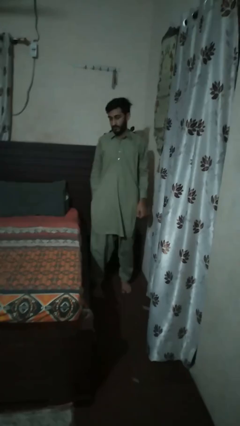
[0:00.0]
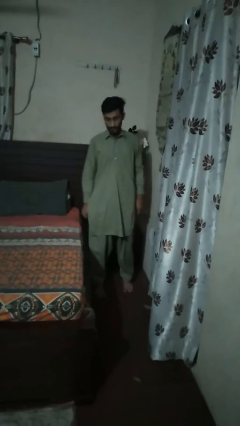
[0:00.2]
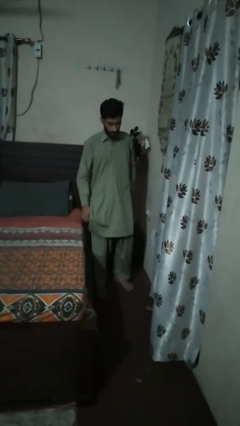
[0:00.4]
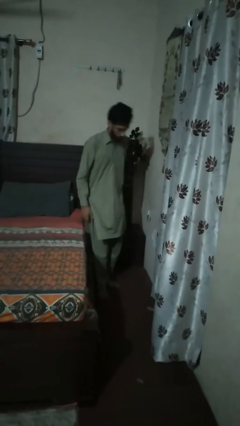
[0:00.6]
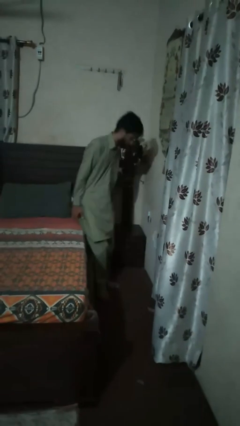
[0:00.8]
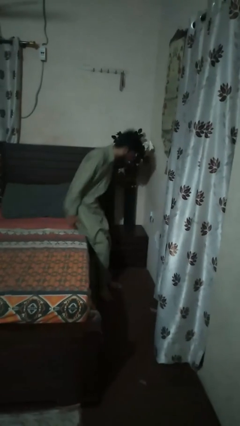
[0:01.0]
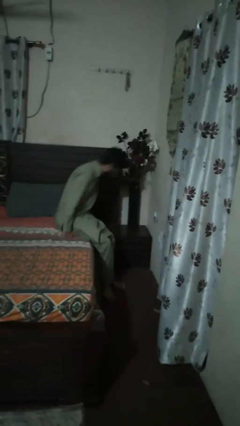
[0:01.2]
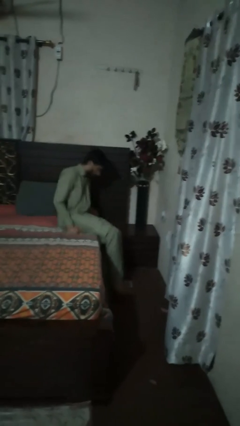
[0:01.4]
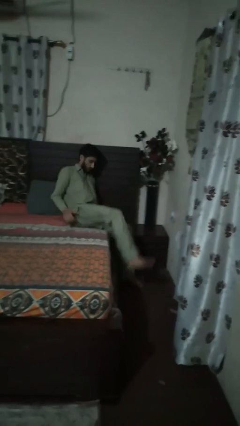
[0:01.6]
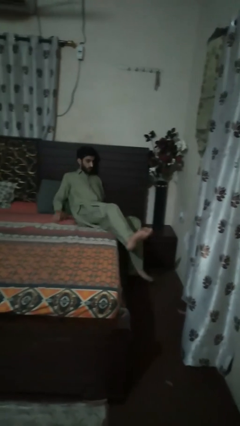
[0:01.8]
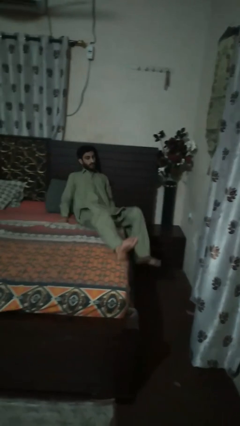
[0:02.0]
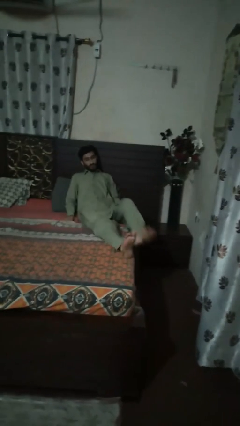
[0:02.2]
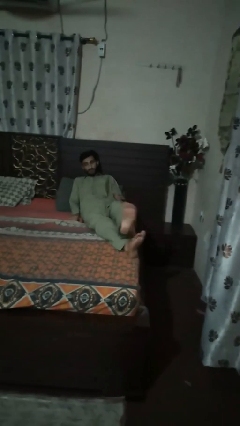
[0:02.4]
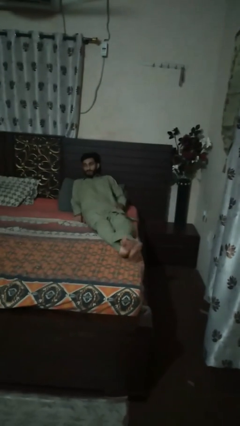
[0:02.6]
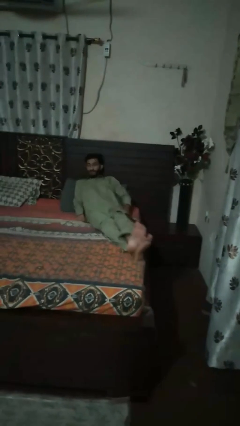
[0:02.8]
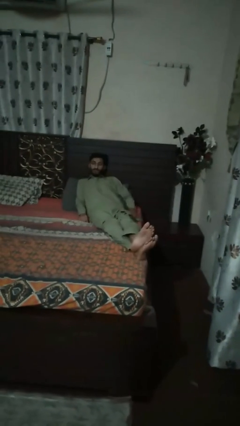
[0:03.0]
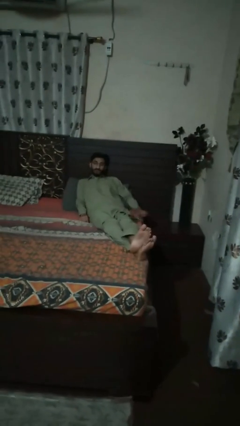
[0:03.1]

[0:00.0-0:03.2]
person lies down on bed

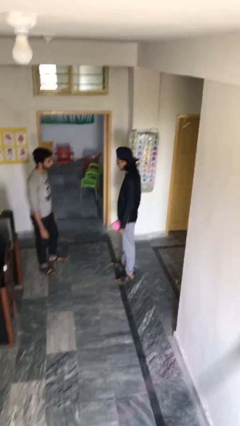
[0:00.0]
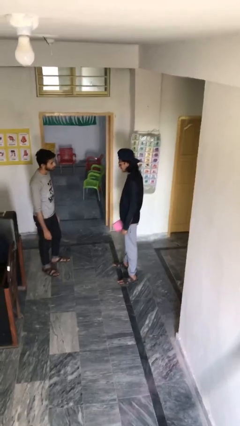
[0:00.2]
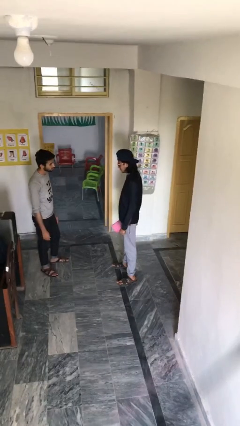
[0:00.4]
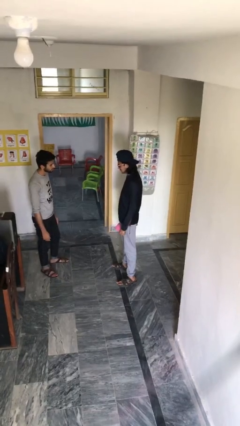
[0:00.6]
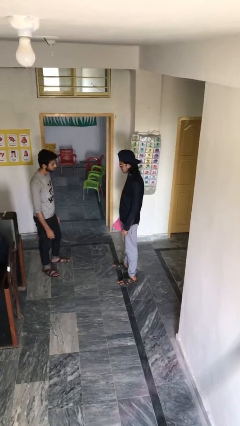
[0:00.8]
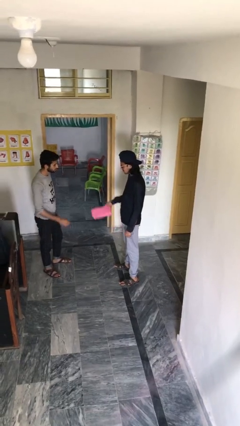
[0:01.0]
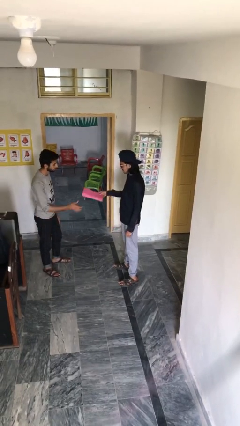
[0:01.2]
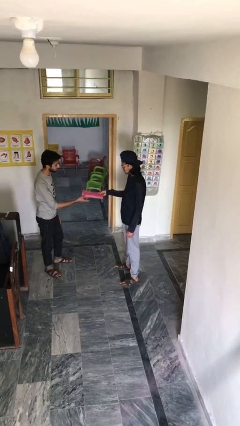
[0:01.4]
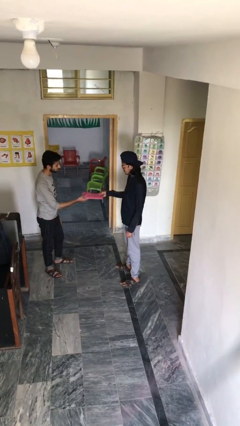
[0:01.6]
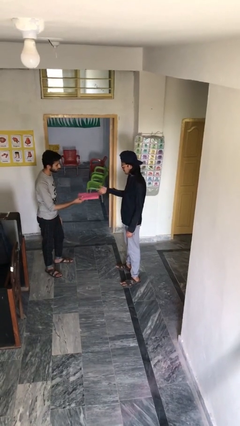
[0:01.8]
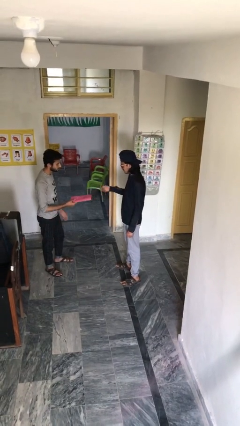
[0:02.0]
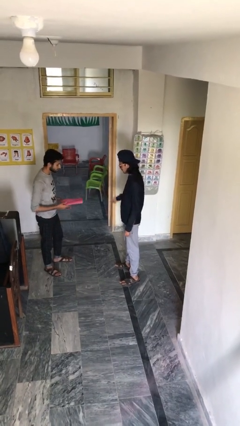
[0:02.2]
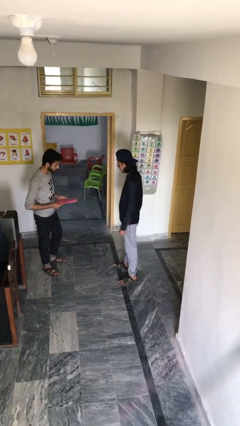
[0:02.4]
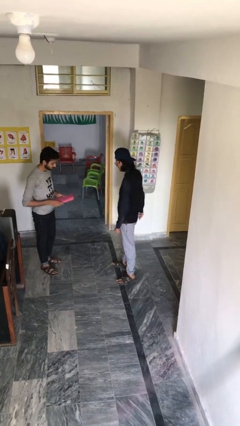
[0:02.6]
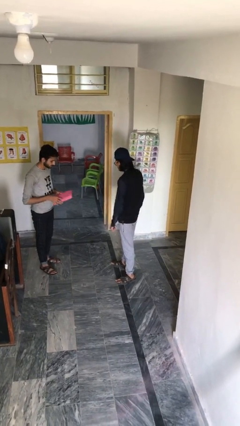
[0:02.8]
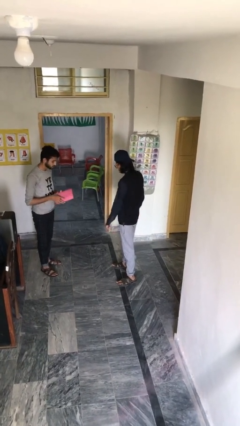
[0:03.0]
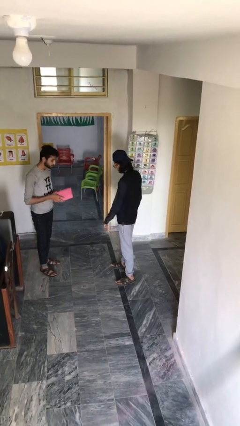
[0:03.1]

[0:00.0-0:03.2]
person transfers object to person

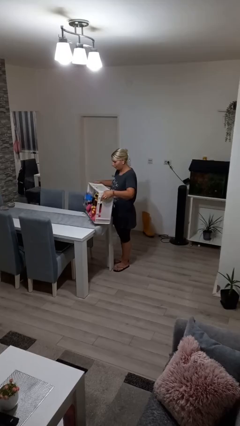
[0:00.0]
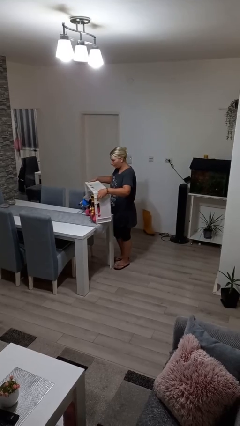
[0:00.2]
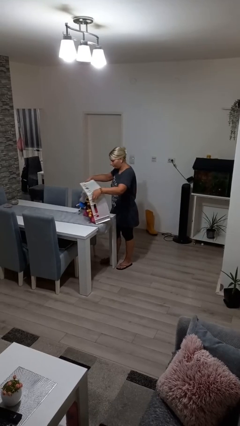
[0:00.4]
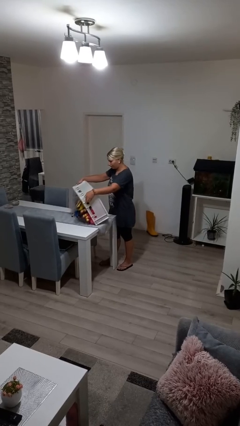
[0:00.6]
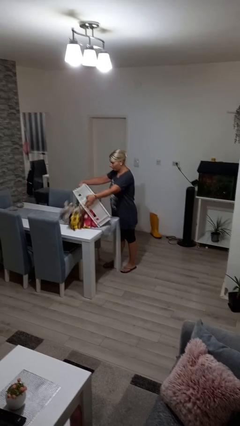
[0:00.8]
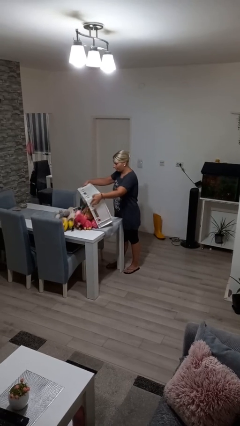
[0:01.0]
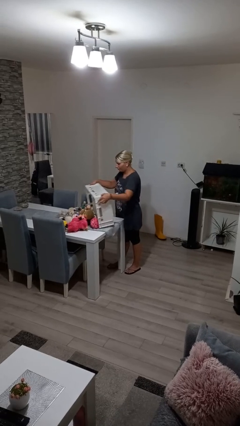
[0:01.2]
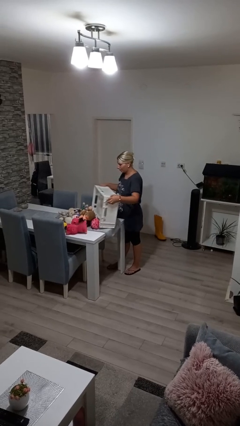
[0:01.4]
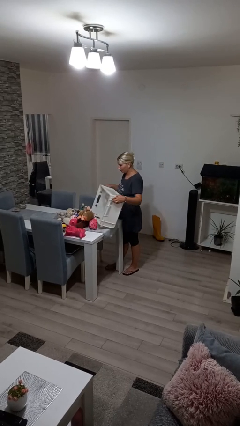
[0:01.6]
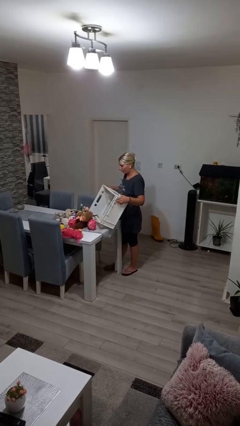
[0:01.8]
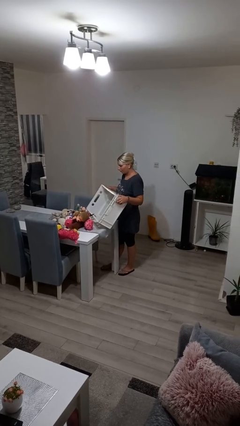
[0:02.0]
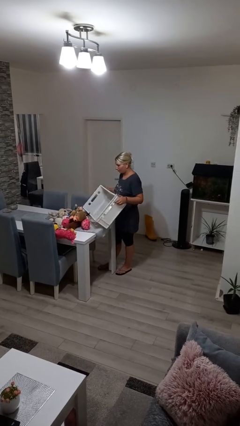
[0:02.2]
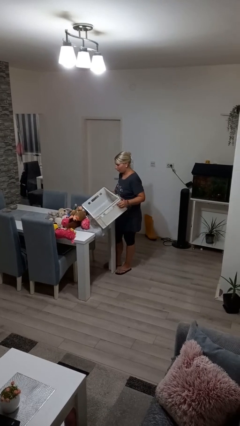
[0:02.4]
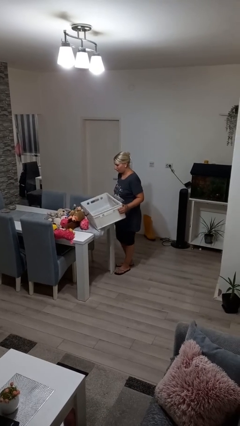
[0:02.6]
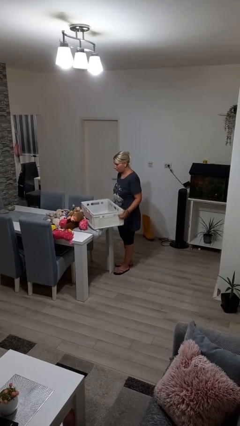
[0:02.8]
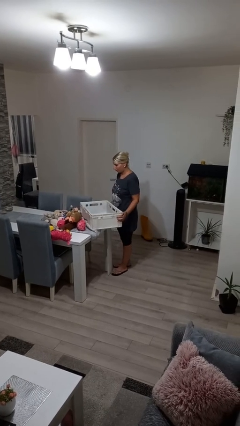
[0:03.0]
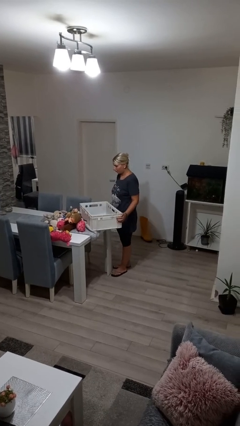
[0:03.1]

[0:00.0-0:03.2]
person unloads box onto table

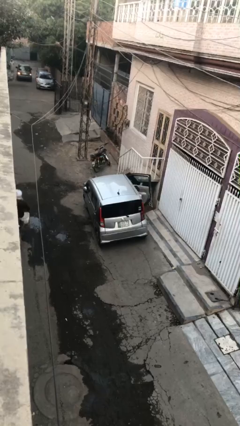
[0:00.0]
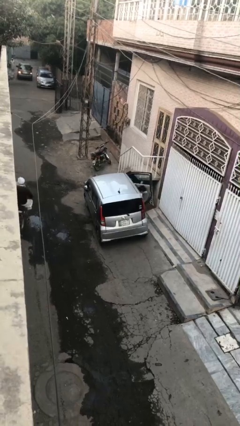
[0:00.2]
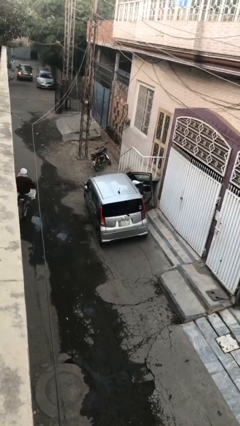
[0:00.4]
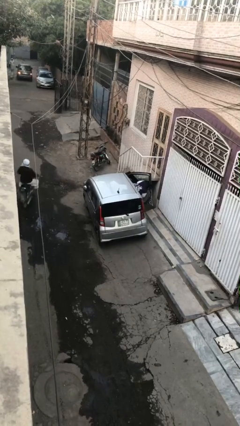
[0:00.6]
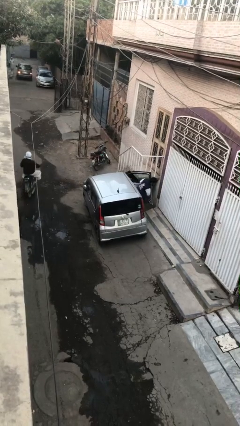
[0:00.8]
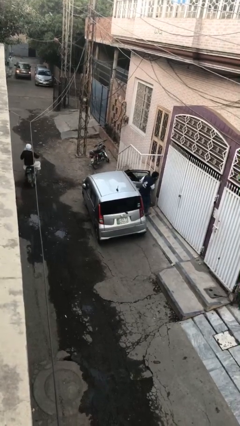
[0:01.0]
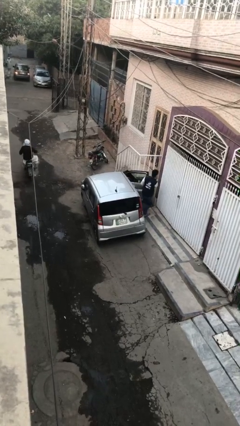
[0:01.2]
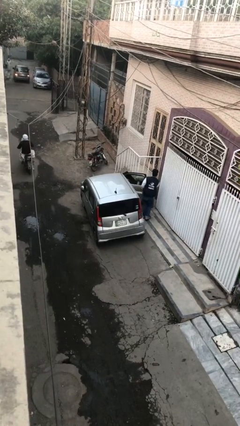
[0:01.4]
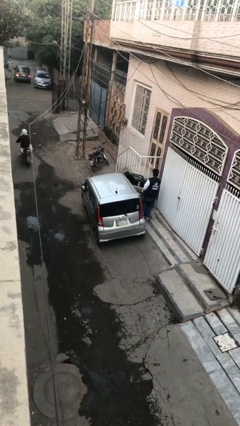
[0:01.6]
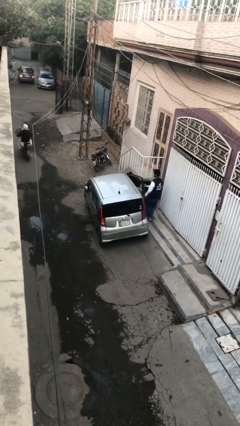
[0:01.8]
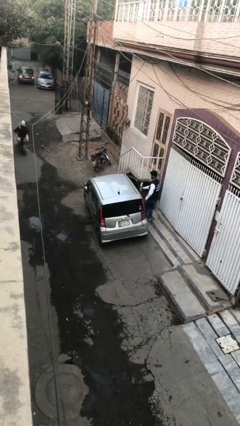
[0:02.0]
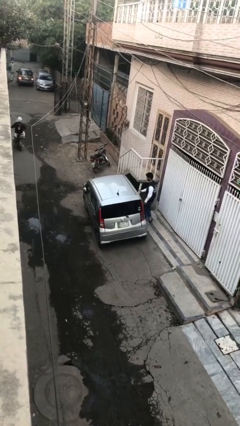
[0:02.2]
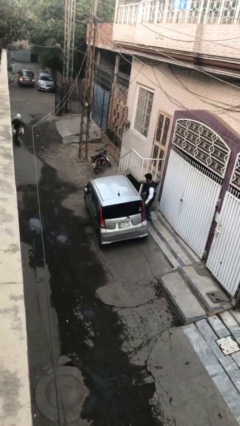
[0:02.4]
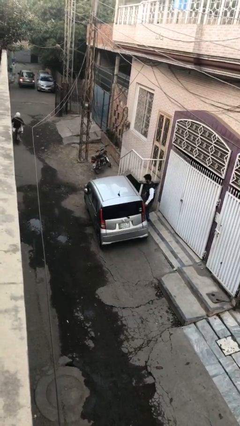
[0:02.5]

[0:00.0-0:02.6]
car drops off person

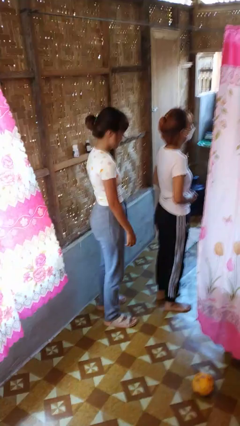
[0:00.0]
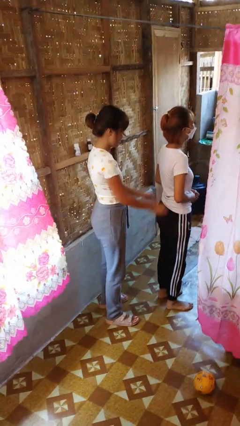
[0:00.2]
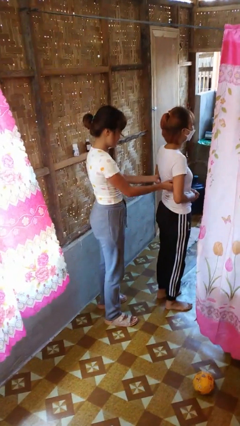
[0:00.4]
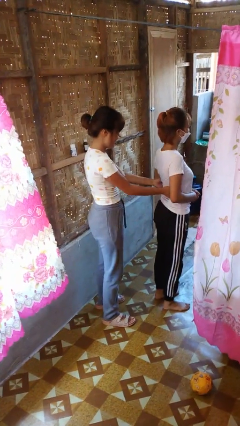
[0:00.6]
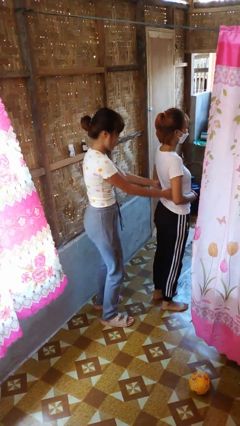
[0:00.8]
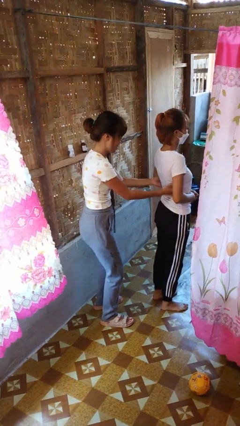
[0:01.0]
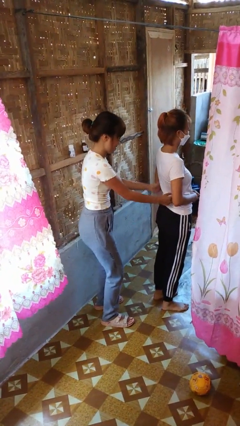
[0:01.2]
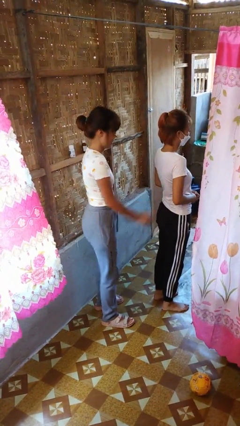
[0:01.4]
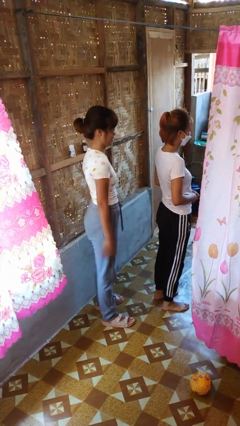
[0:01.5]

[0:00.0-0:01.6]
person tickles person

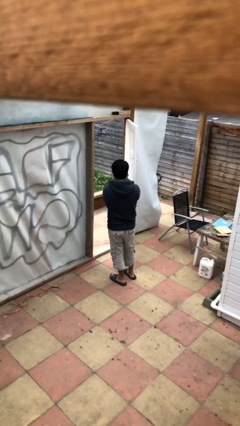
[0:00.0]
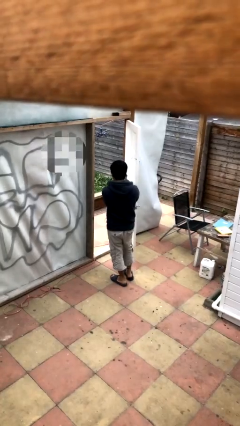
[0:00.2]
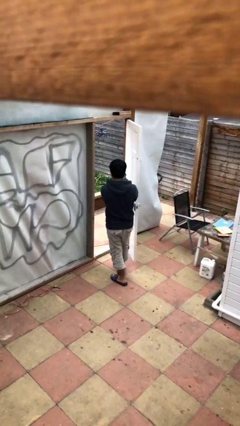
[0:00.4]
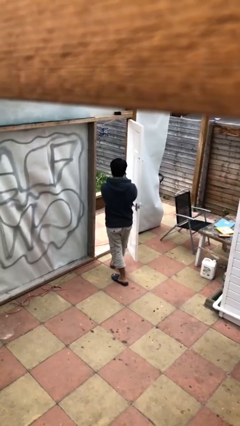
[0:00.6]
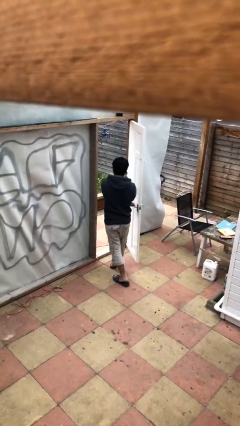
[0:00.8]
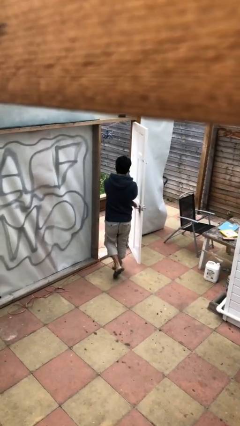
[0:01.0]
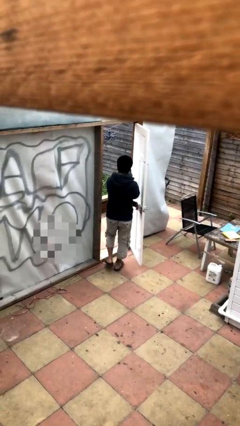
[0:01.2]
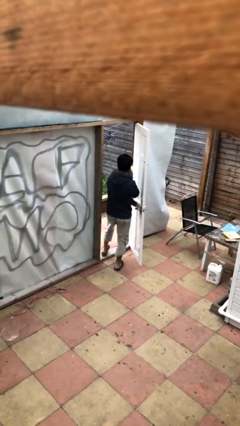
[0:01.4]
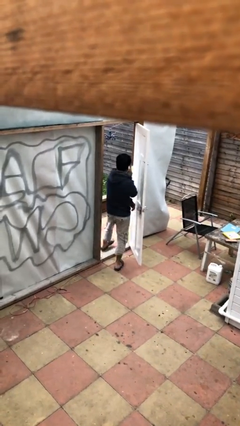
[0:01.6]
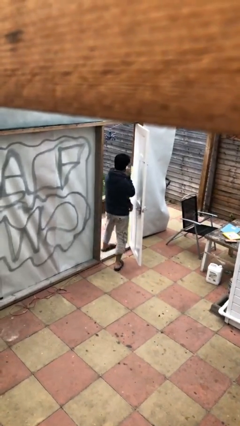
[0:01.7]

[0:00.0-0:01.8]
person exits scene through structure

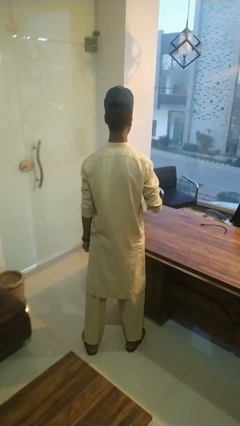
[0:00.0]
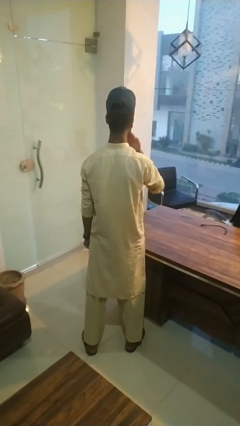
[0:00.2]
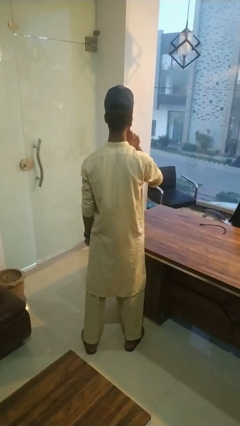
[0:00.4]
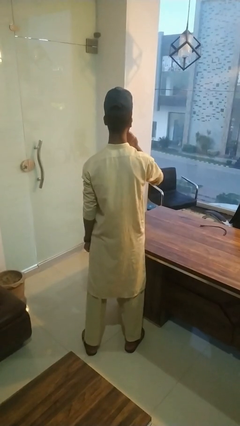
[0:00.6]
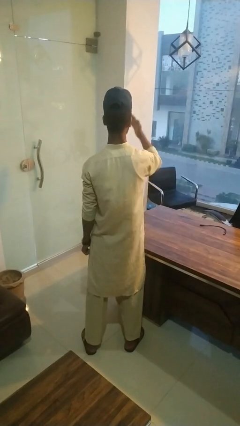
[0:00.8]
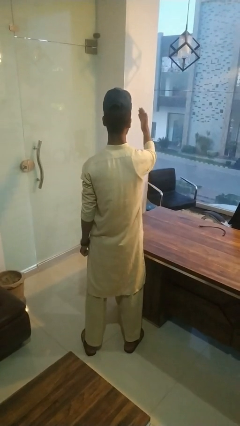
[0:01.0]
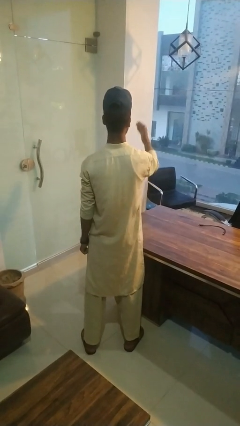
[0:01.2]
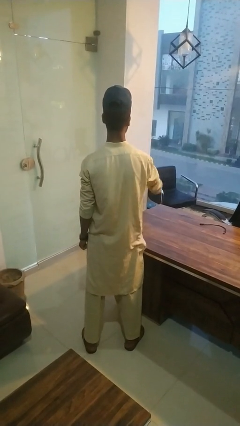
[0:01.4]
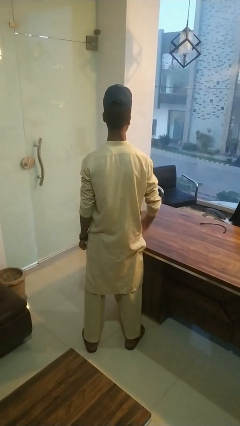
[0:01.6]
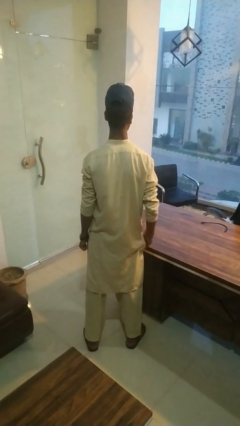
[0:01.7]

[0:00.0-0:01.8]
person gestures blow kiss
